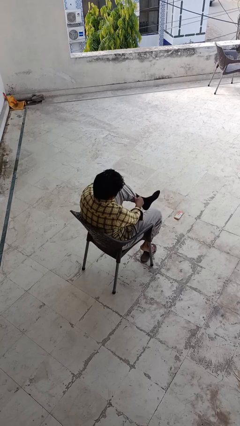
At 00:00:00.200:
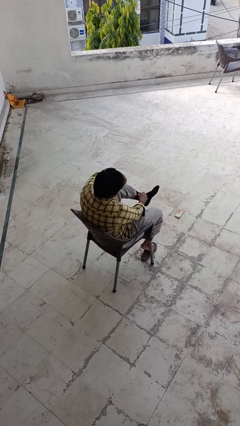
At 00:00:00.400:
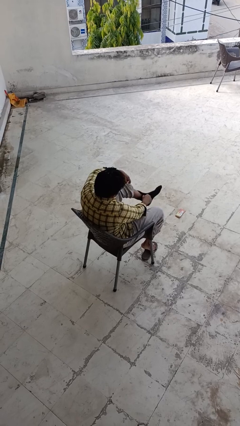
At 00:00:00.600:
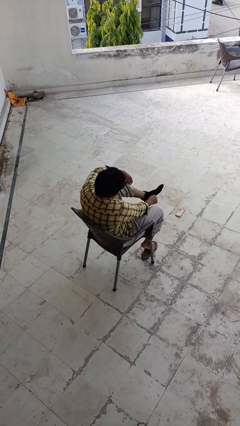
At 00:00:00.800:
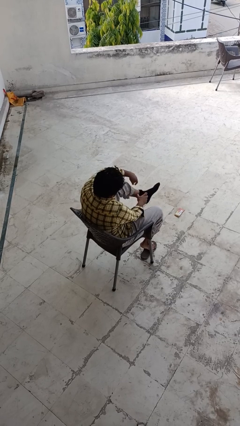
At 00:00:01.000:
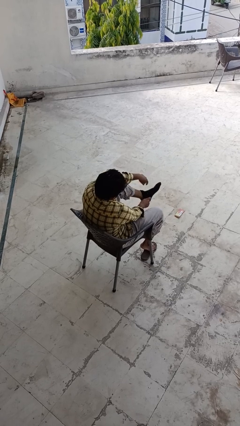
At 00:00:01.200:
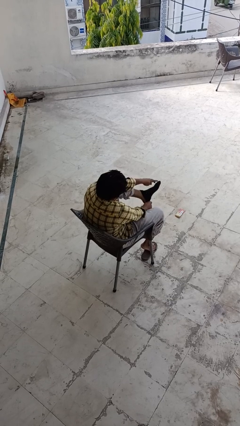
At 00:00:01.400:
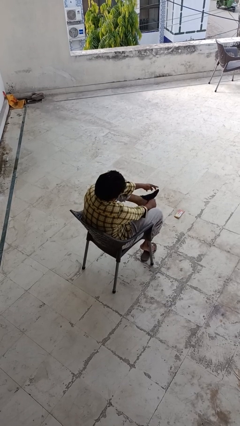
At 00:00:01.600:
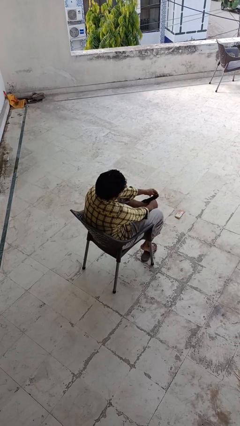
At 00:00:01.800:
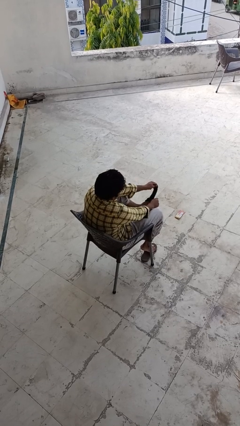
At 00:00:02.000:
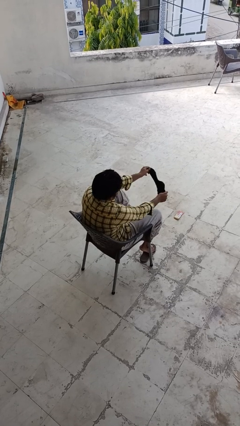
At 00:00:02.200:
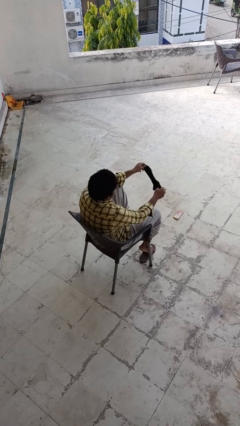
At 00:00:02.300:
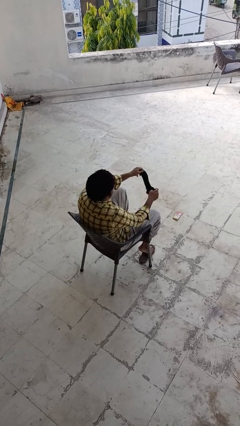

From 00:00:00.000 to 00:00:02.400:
person takes off socks

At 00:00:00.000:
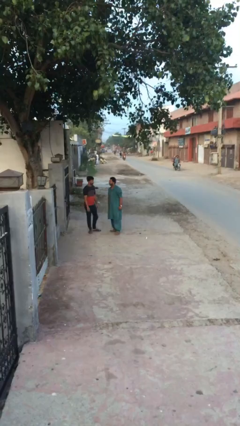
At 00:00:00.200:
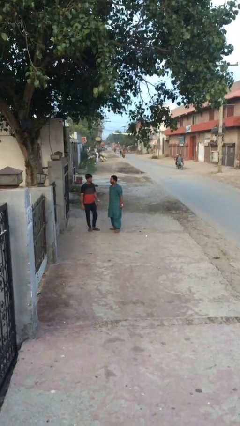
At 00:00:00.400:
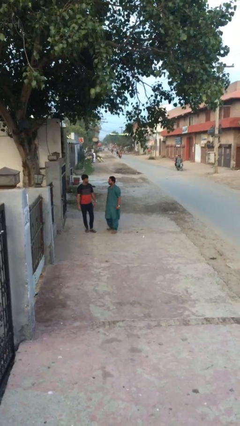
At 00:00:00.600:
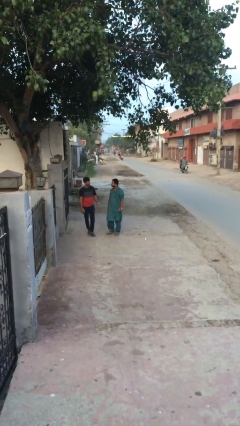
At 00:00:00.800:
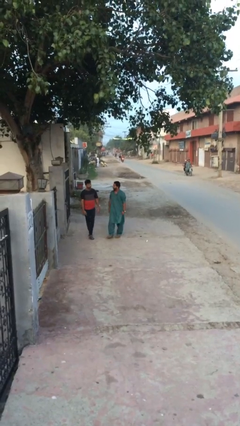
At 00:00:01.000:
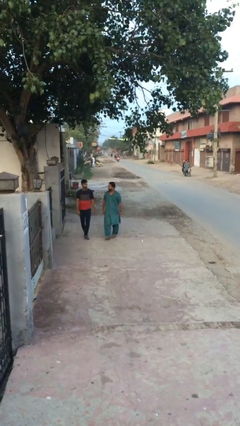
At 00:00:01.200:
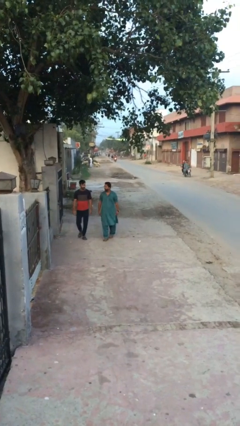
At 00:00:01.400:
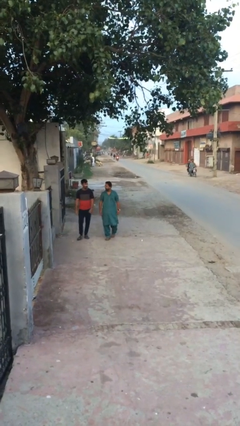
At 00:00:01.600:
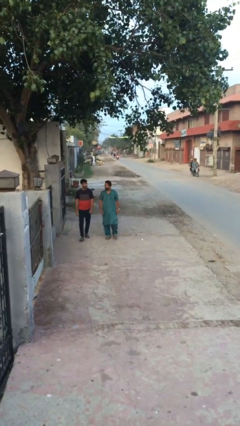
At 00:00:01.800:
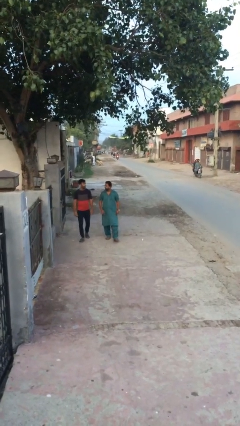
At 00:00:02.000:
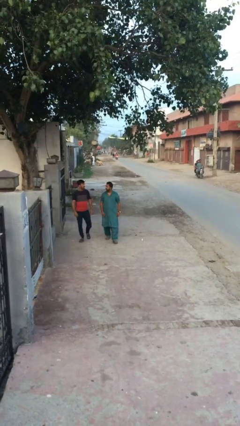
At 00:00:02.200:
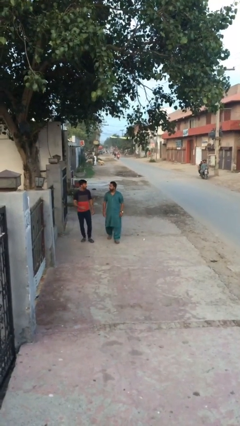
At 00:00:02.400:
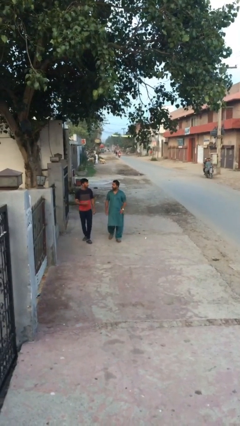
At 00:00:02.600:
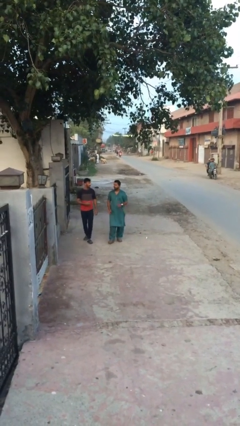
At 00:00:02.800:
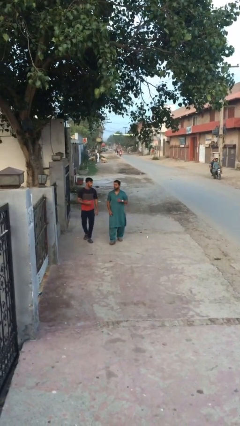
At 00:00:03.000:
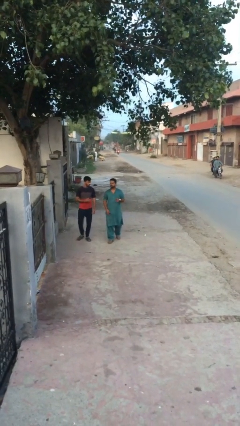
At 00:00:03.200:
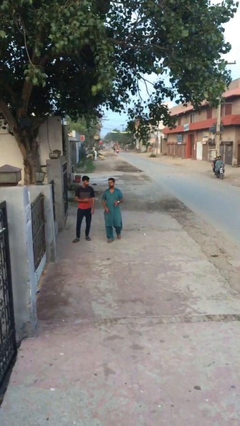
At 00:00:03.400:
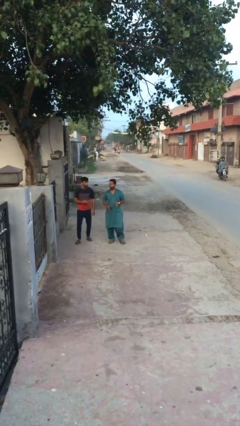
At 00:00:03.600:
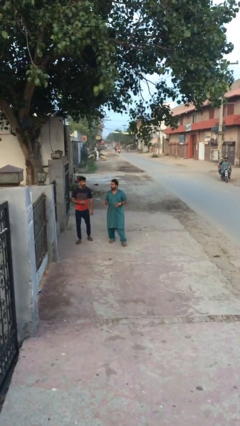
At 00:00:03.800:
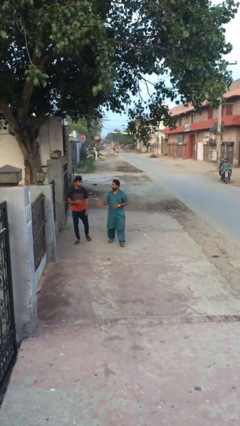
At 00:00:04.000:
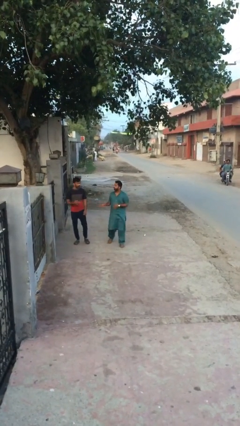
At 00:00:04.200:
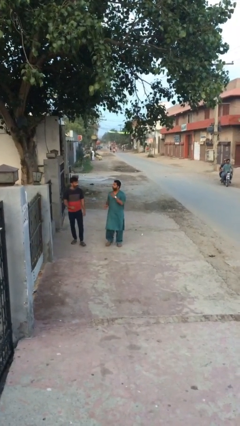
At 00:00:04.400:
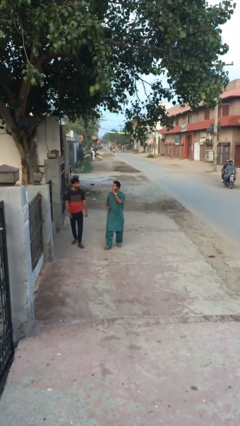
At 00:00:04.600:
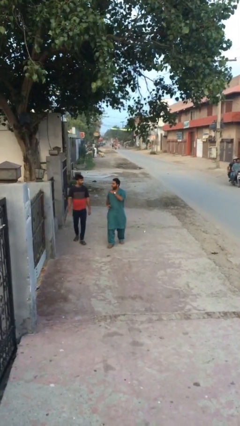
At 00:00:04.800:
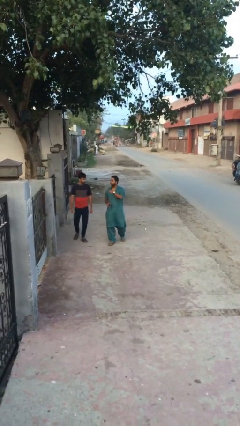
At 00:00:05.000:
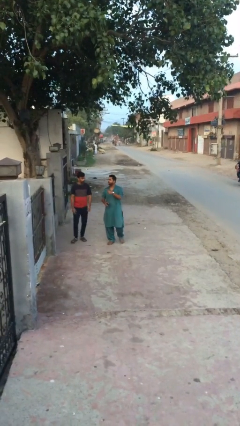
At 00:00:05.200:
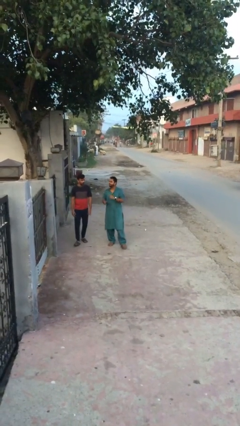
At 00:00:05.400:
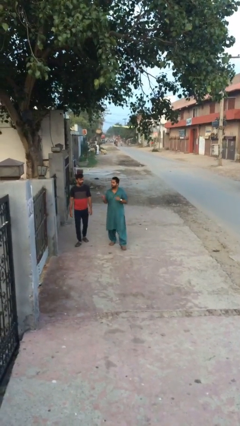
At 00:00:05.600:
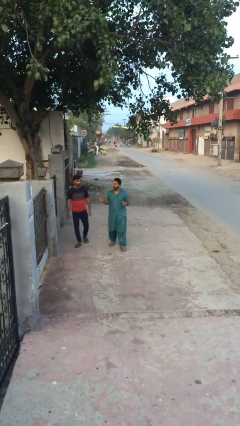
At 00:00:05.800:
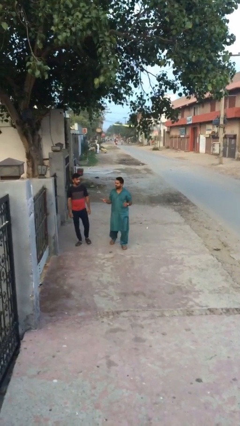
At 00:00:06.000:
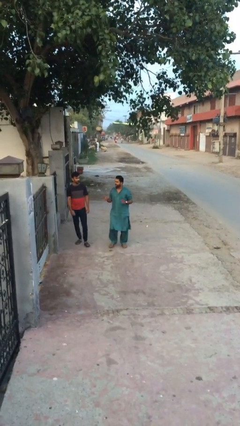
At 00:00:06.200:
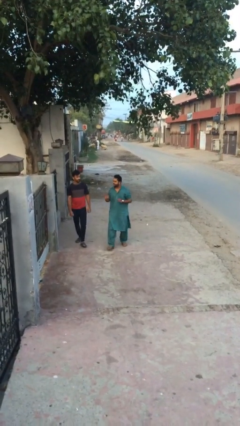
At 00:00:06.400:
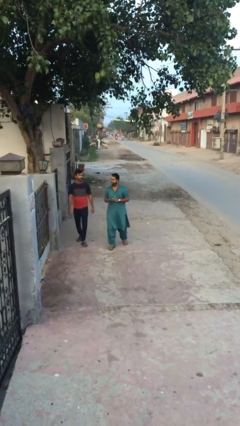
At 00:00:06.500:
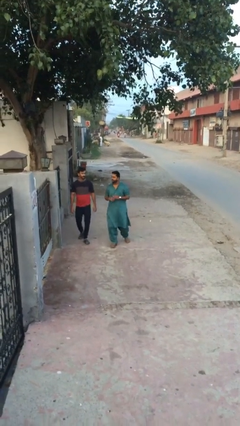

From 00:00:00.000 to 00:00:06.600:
person talks to person

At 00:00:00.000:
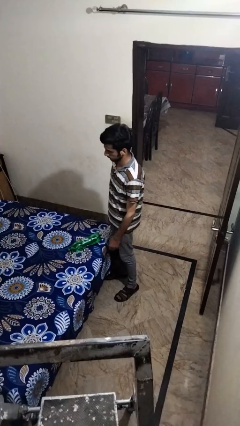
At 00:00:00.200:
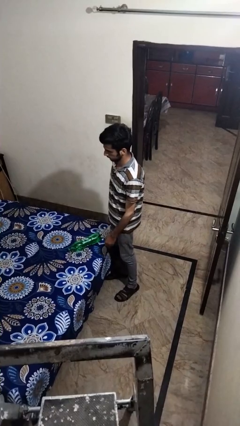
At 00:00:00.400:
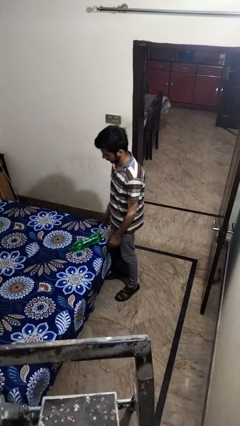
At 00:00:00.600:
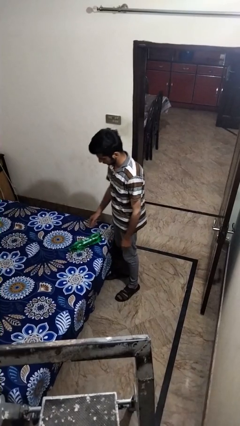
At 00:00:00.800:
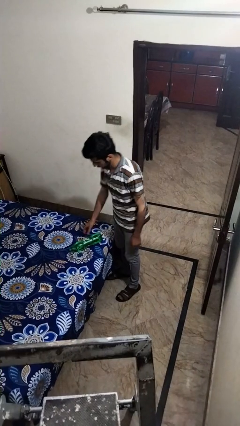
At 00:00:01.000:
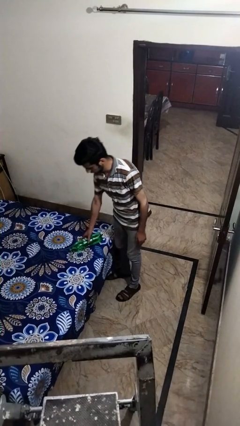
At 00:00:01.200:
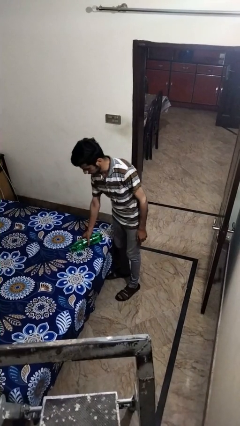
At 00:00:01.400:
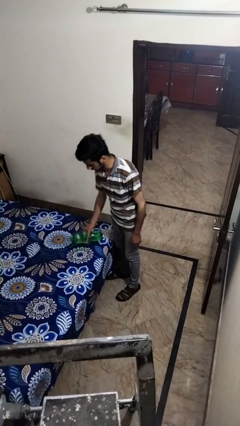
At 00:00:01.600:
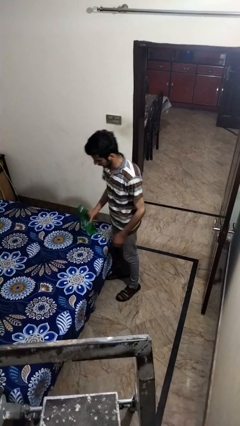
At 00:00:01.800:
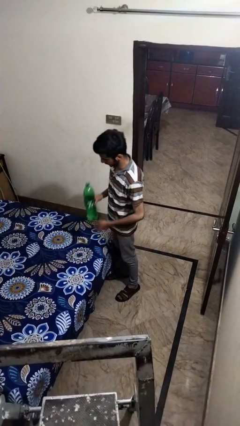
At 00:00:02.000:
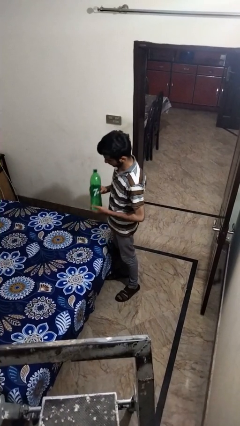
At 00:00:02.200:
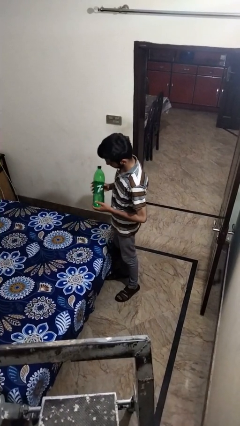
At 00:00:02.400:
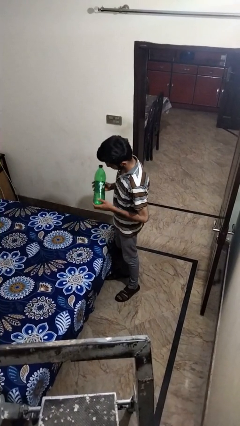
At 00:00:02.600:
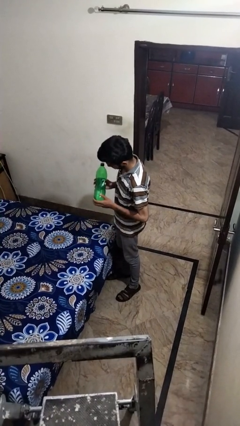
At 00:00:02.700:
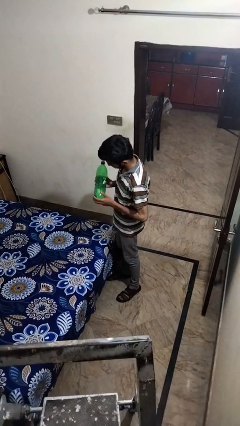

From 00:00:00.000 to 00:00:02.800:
person picks up object from bed

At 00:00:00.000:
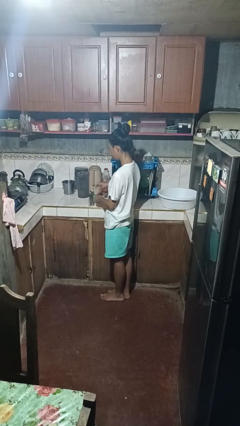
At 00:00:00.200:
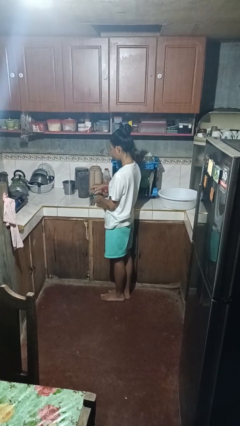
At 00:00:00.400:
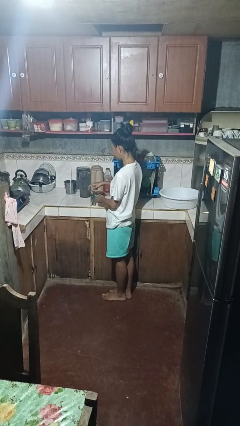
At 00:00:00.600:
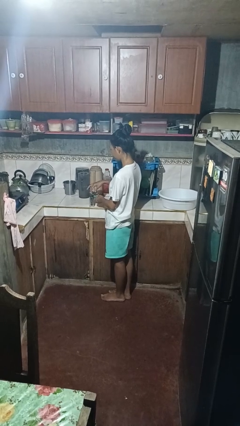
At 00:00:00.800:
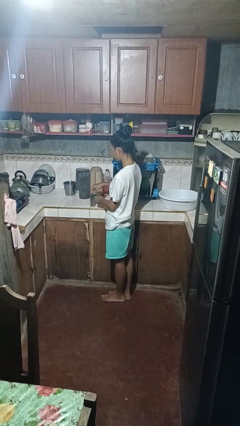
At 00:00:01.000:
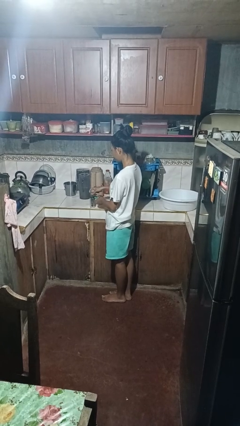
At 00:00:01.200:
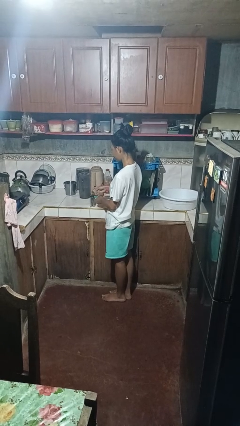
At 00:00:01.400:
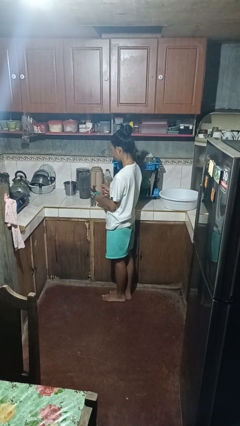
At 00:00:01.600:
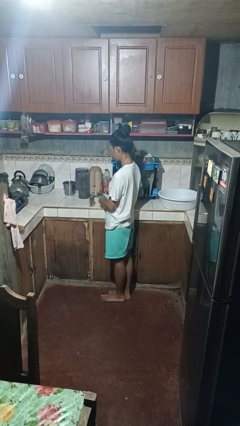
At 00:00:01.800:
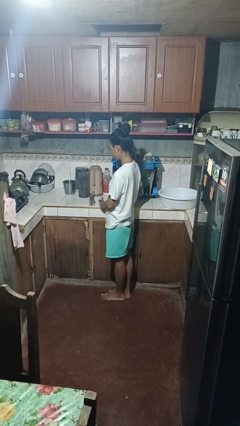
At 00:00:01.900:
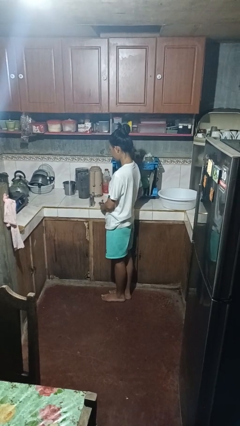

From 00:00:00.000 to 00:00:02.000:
person opens can with can opener

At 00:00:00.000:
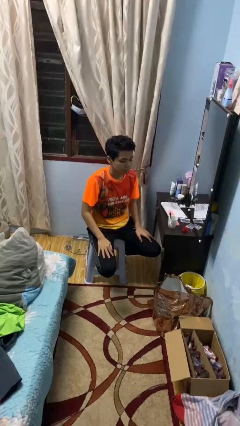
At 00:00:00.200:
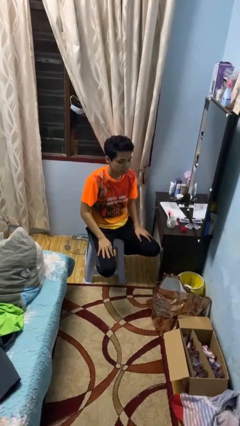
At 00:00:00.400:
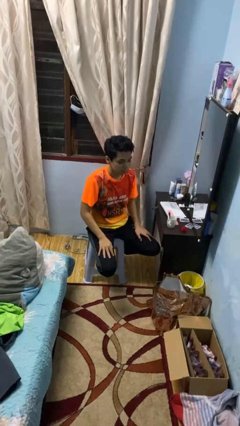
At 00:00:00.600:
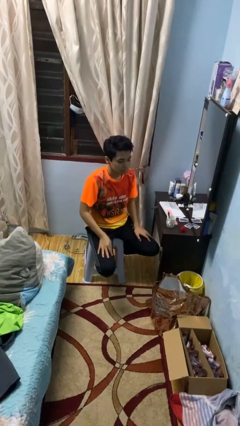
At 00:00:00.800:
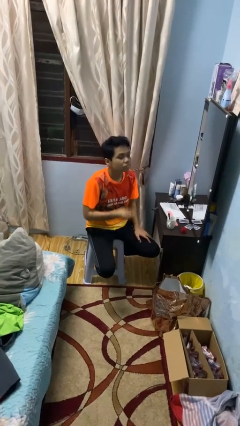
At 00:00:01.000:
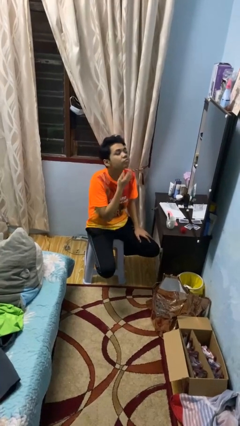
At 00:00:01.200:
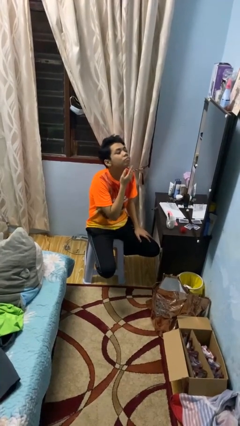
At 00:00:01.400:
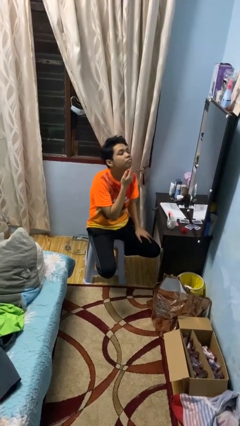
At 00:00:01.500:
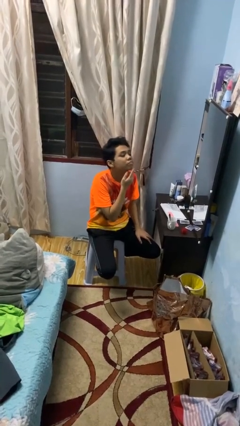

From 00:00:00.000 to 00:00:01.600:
person strokes chin

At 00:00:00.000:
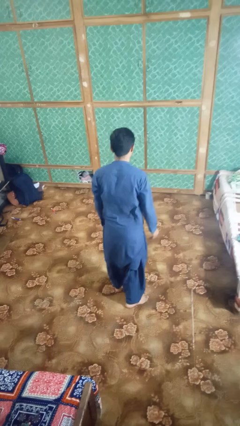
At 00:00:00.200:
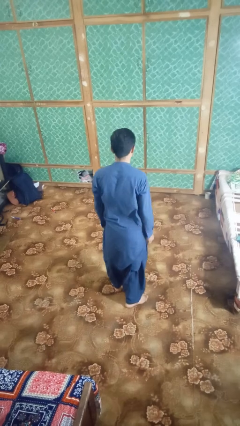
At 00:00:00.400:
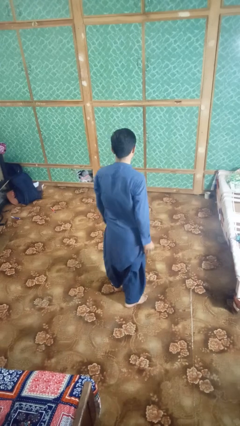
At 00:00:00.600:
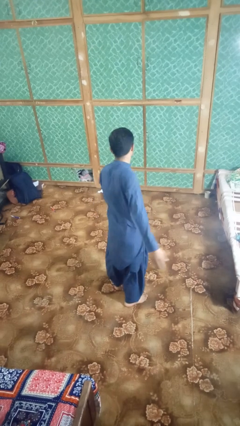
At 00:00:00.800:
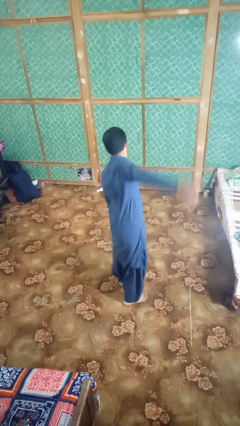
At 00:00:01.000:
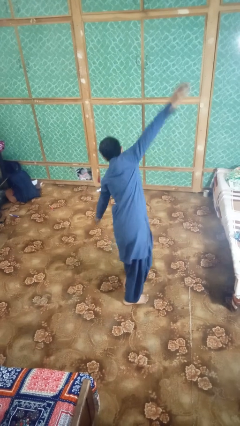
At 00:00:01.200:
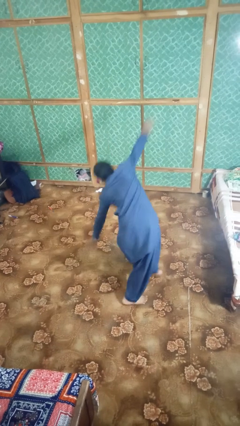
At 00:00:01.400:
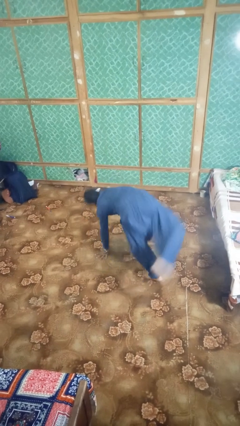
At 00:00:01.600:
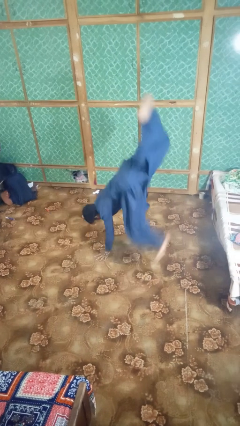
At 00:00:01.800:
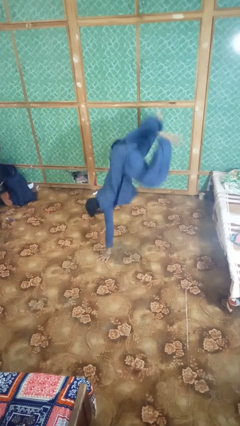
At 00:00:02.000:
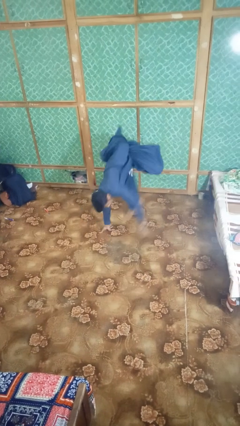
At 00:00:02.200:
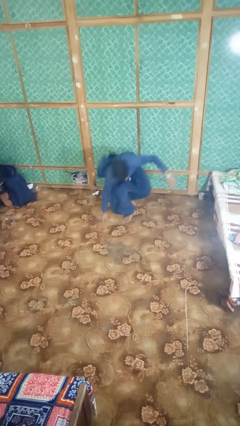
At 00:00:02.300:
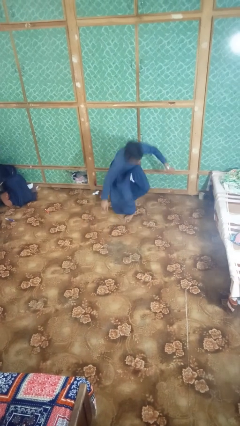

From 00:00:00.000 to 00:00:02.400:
person somersaults
